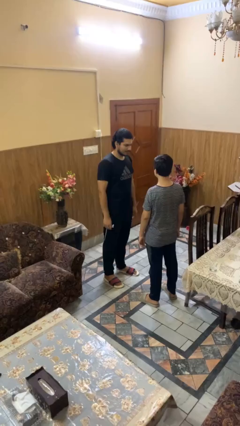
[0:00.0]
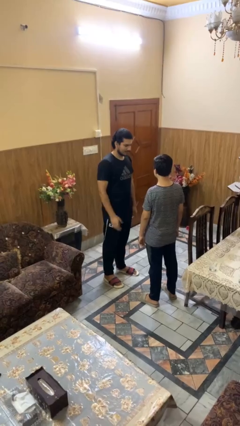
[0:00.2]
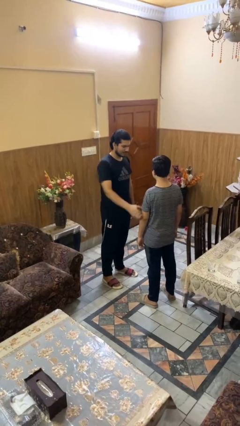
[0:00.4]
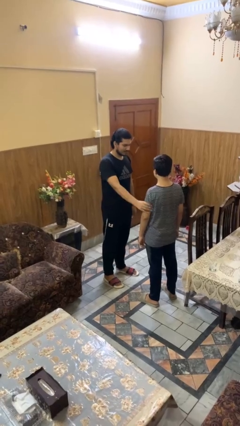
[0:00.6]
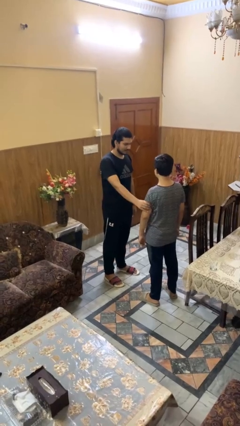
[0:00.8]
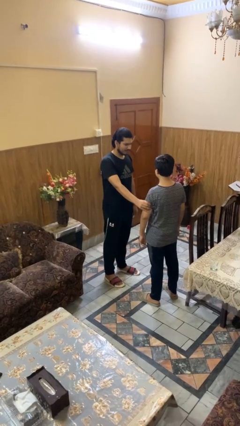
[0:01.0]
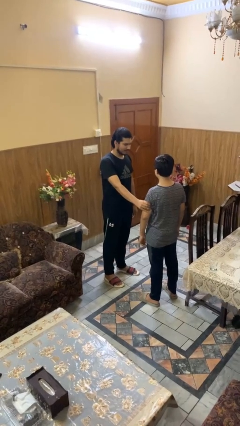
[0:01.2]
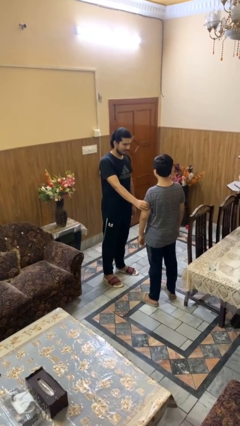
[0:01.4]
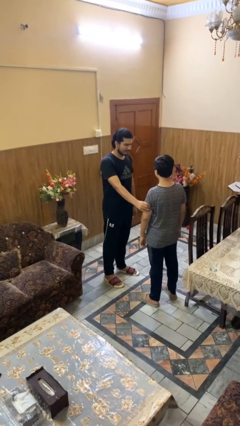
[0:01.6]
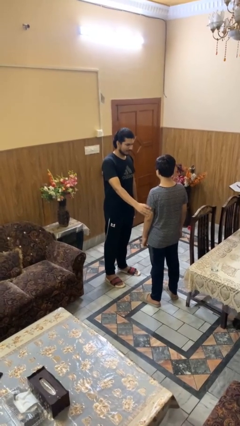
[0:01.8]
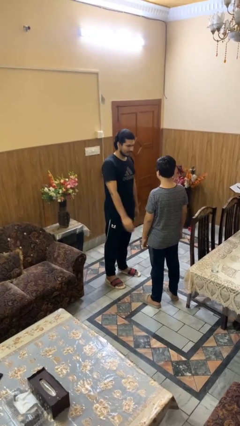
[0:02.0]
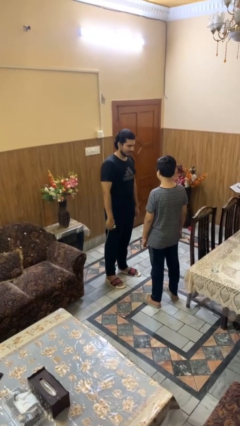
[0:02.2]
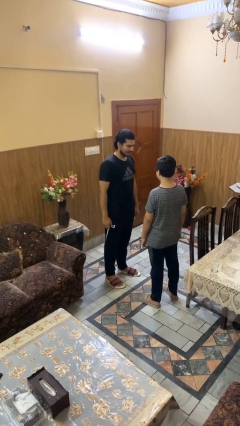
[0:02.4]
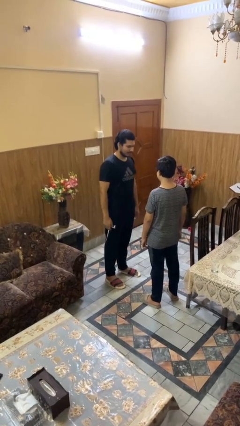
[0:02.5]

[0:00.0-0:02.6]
person grabs person by bicep

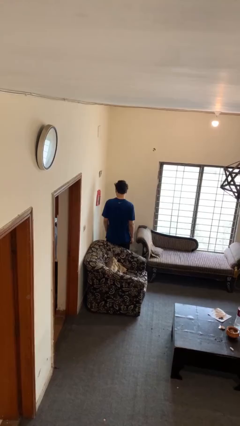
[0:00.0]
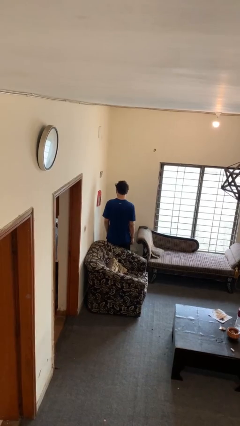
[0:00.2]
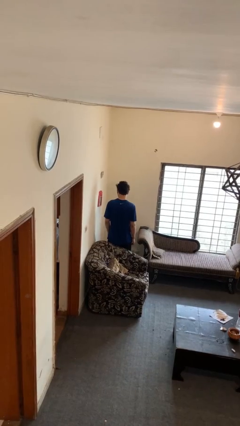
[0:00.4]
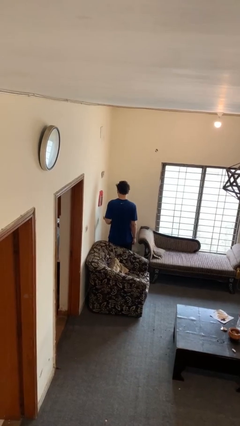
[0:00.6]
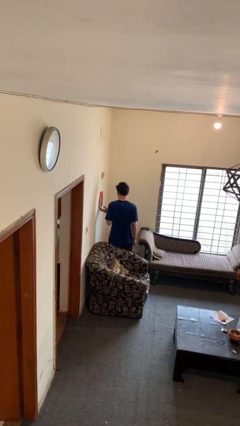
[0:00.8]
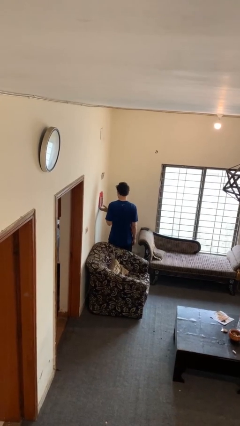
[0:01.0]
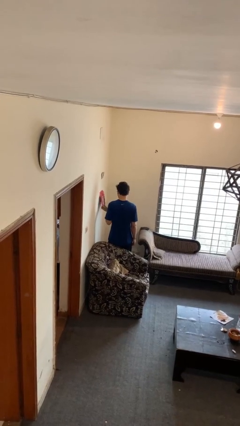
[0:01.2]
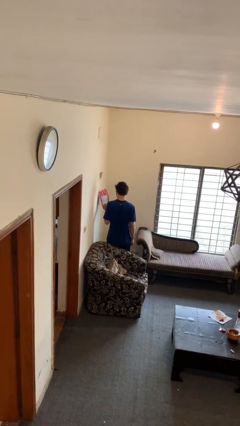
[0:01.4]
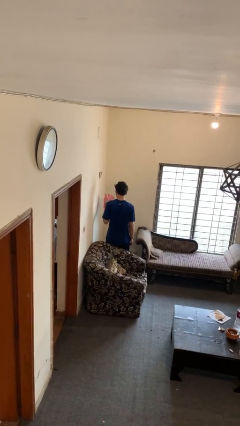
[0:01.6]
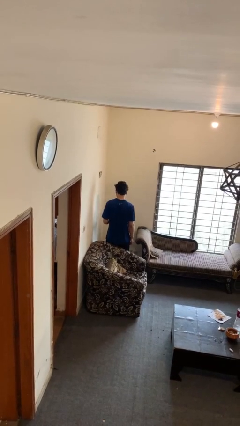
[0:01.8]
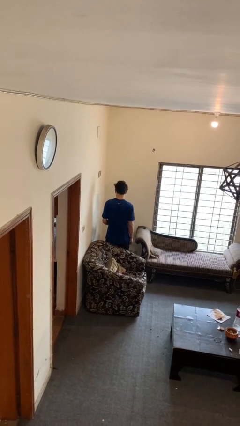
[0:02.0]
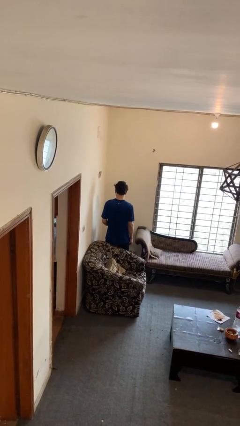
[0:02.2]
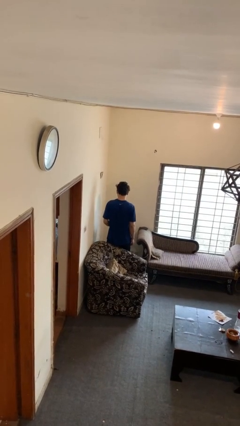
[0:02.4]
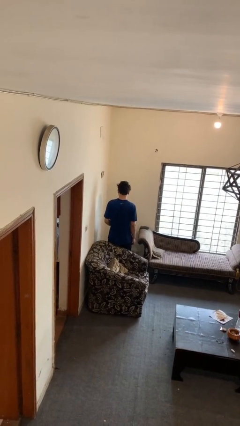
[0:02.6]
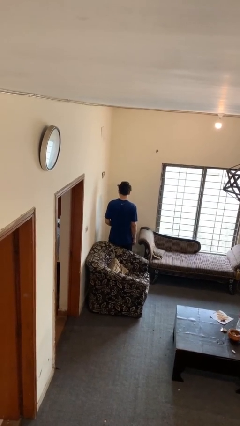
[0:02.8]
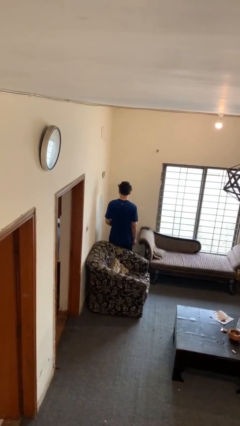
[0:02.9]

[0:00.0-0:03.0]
person takes down picture frame

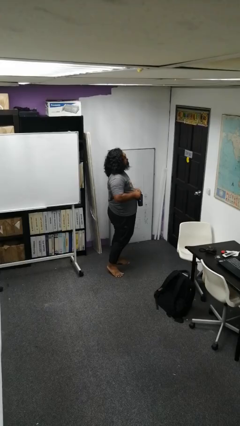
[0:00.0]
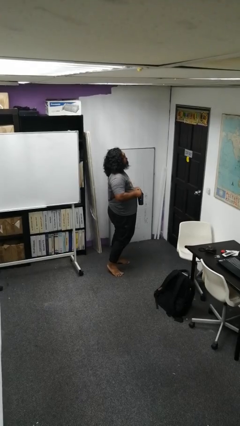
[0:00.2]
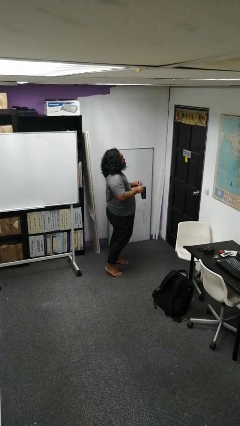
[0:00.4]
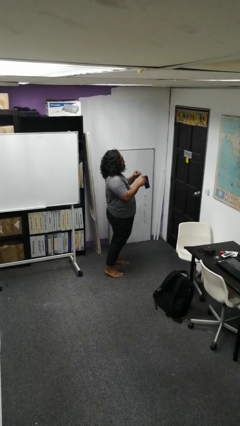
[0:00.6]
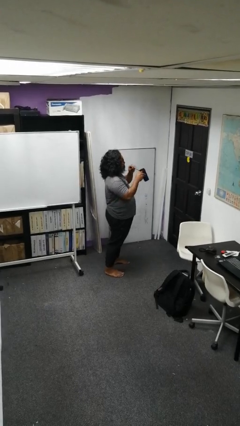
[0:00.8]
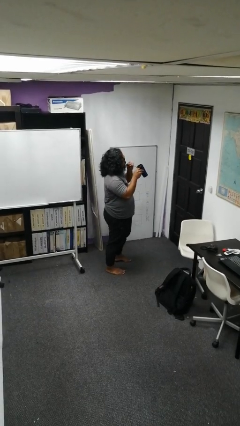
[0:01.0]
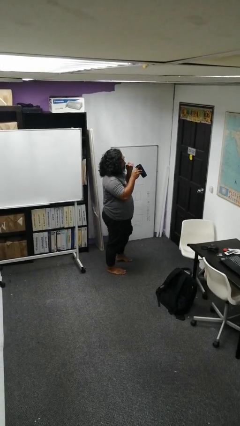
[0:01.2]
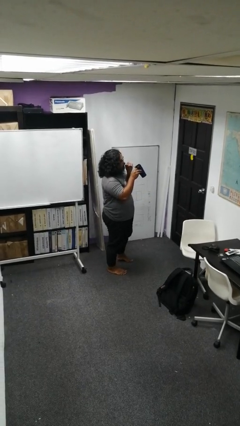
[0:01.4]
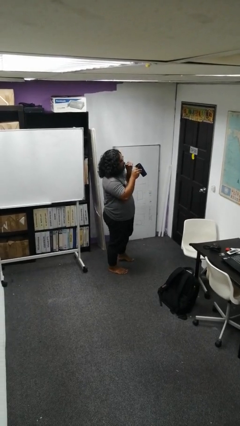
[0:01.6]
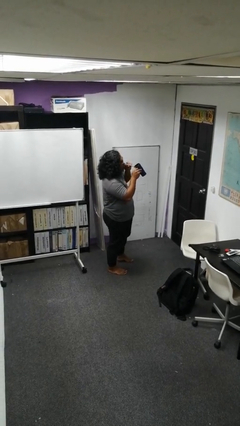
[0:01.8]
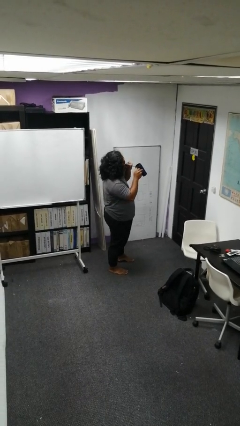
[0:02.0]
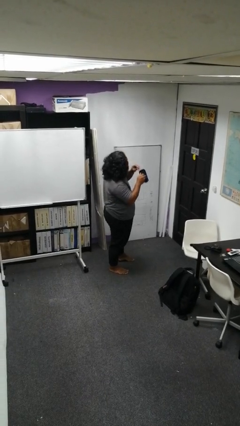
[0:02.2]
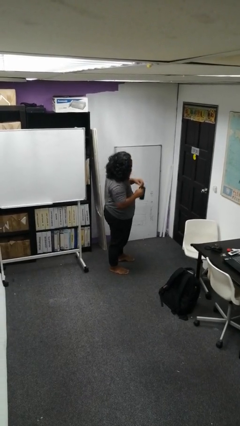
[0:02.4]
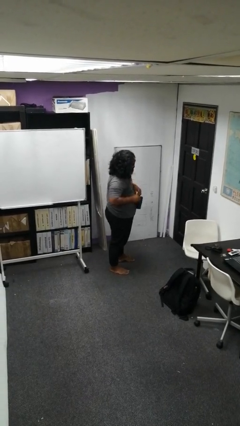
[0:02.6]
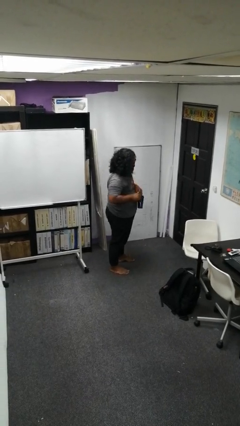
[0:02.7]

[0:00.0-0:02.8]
person drinks from straw

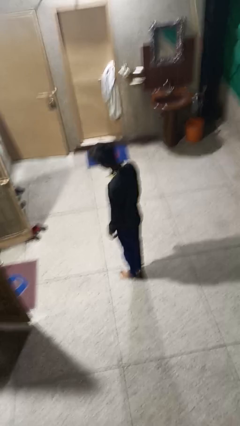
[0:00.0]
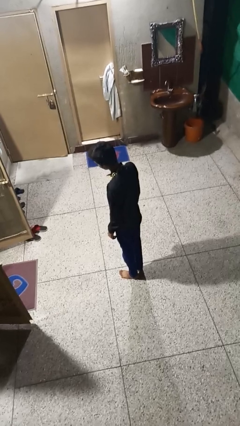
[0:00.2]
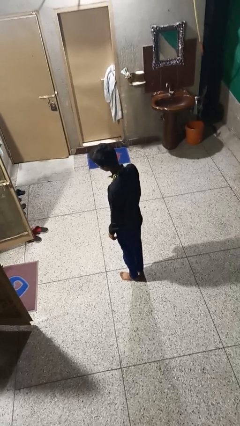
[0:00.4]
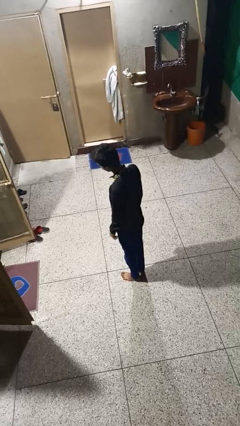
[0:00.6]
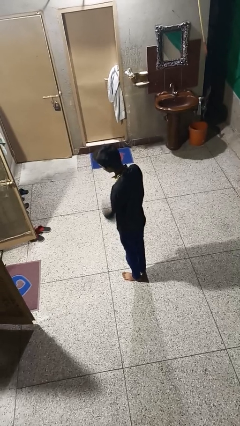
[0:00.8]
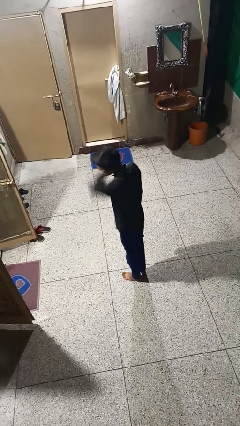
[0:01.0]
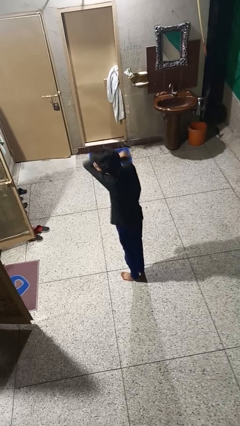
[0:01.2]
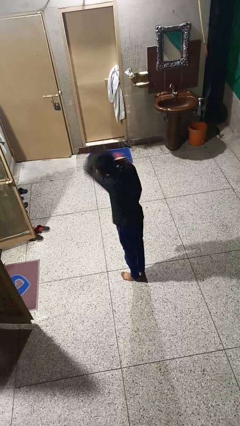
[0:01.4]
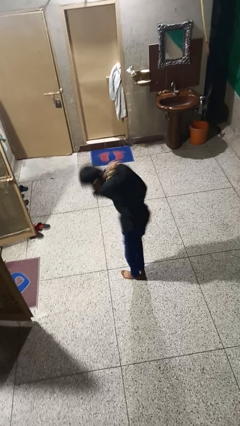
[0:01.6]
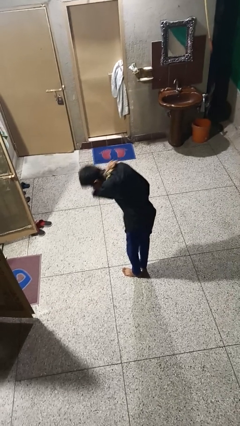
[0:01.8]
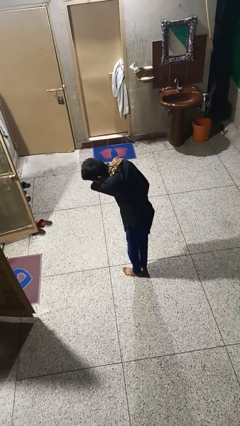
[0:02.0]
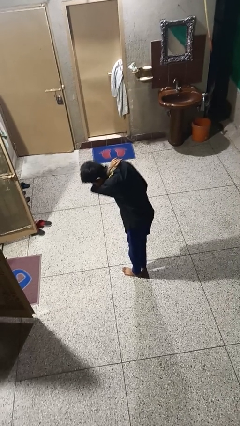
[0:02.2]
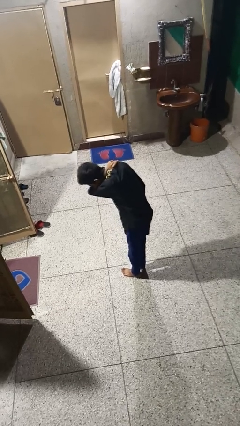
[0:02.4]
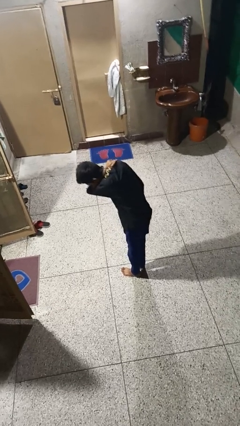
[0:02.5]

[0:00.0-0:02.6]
person sneezes into arm

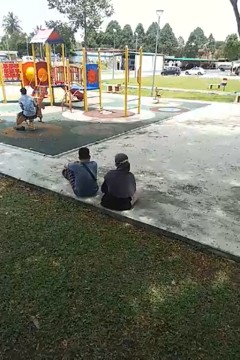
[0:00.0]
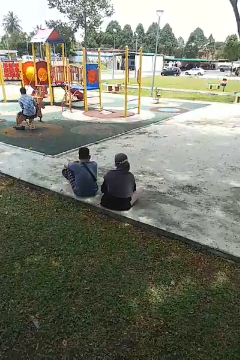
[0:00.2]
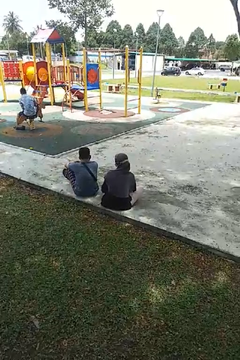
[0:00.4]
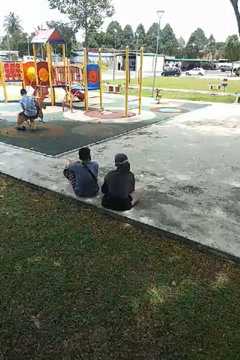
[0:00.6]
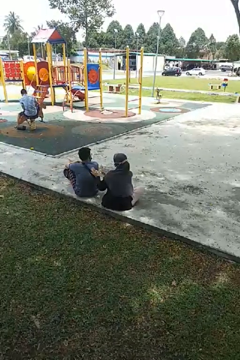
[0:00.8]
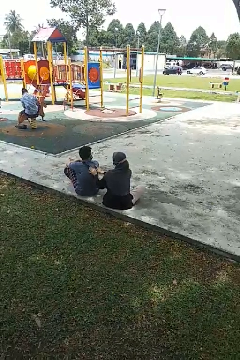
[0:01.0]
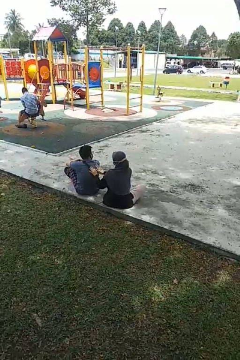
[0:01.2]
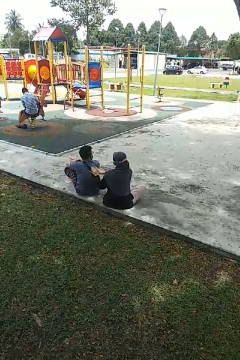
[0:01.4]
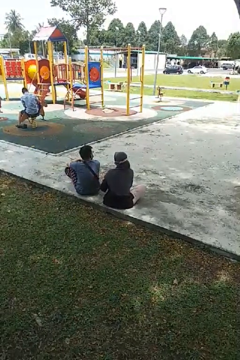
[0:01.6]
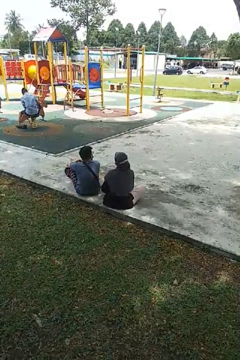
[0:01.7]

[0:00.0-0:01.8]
person touches back of person

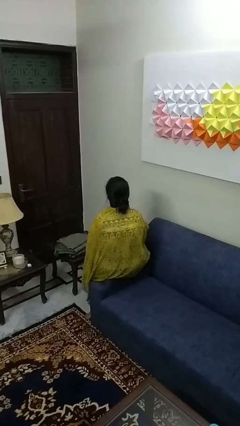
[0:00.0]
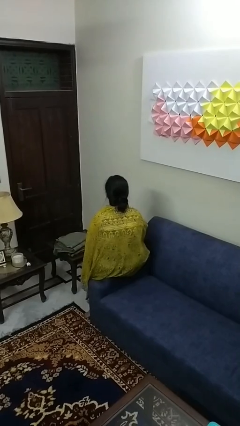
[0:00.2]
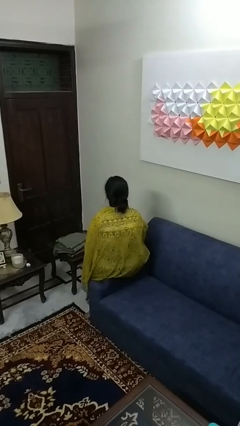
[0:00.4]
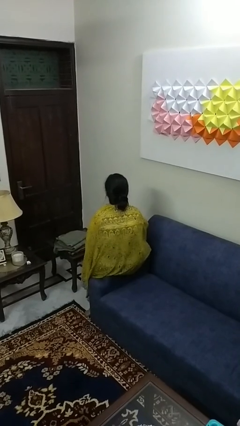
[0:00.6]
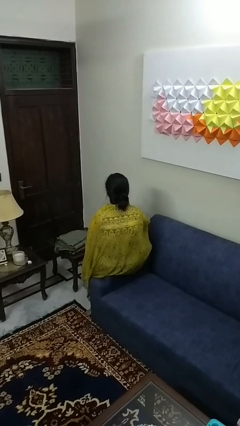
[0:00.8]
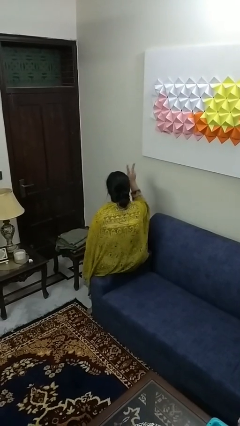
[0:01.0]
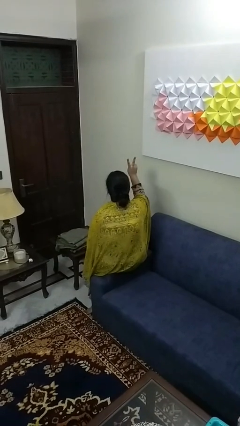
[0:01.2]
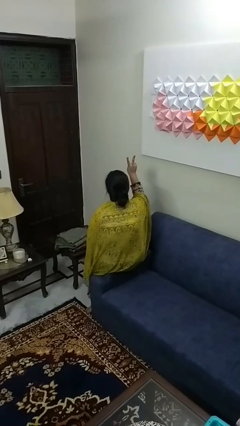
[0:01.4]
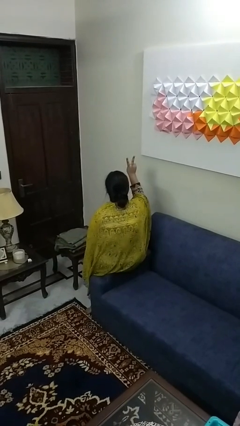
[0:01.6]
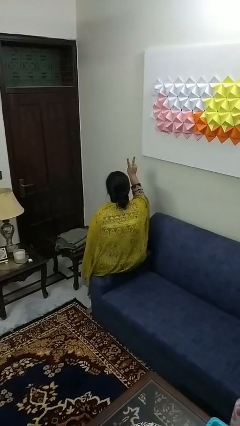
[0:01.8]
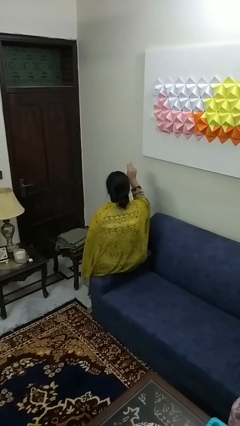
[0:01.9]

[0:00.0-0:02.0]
person gestures peace

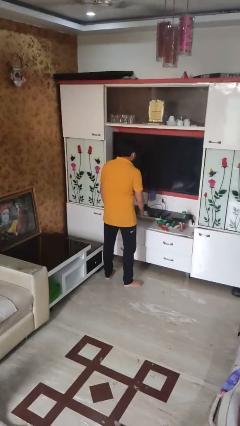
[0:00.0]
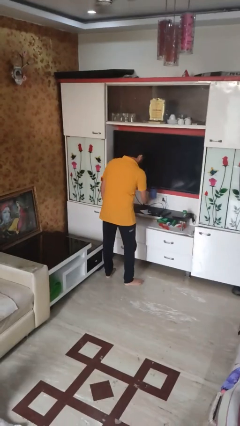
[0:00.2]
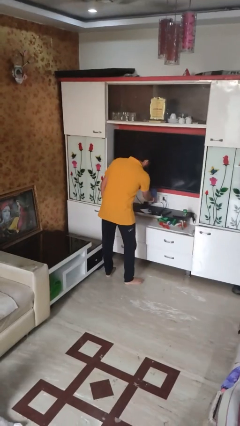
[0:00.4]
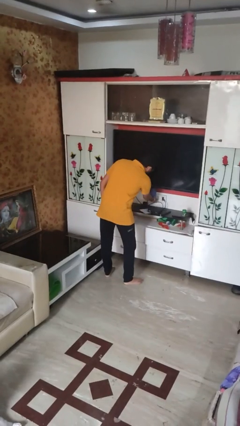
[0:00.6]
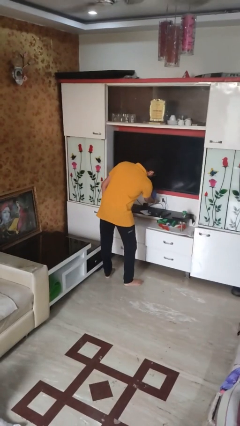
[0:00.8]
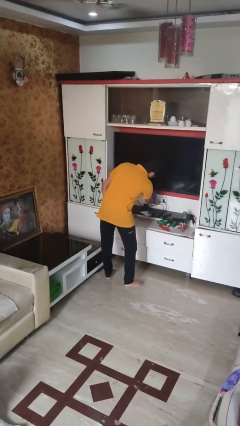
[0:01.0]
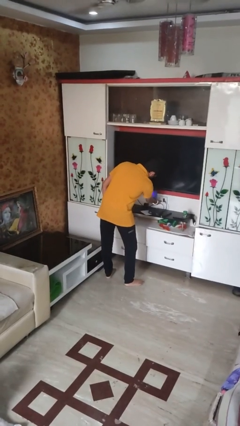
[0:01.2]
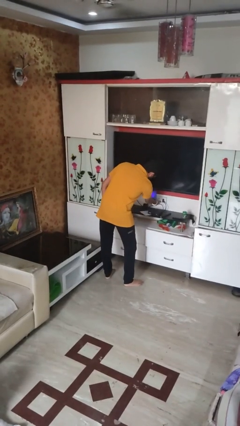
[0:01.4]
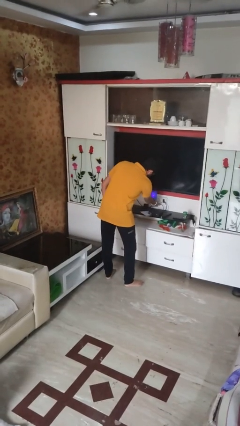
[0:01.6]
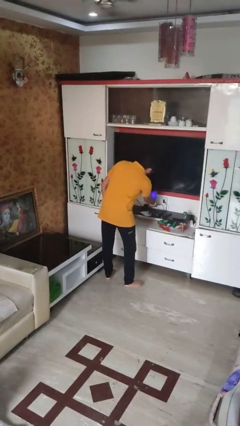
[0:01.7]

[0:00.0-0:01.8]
person turns on lamp

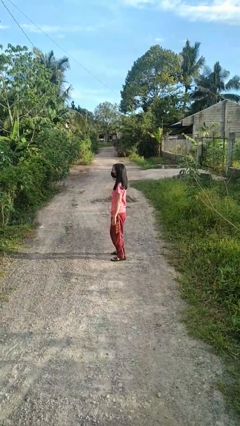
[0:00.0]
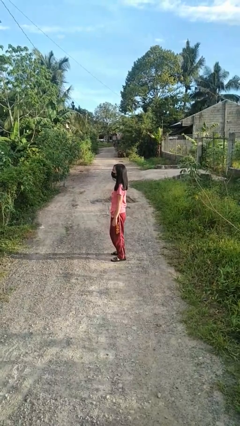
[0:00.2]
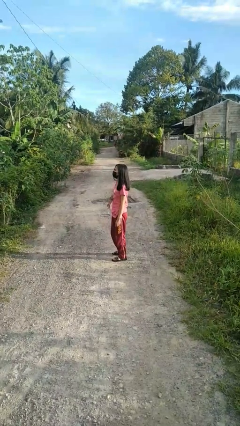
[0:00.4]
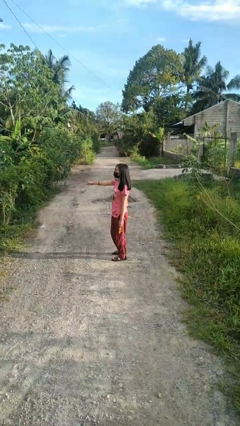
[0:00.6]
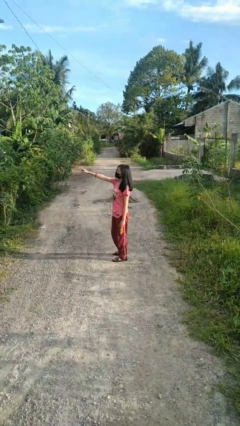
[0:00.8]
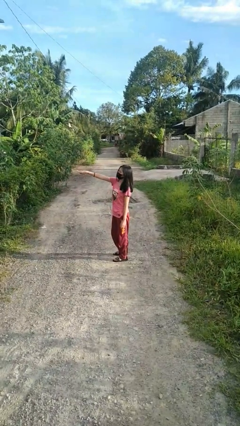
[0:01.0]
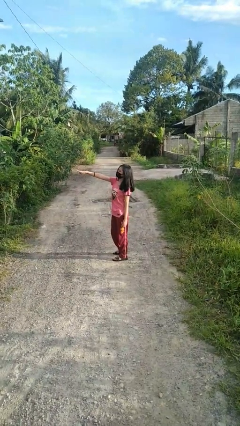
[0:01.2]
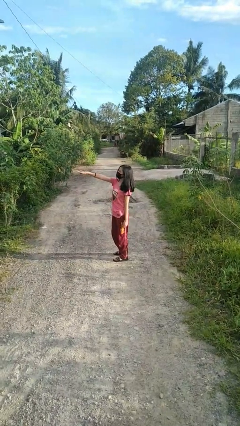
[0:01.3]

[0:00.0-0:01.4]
person points at person
